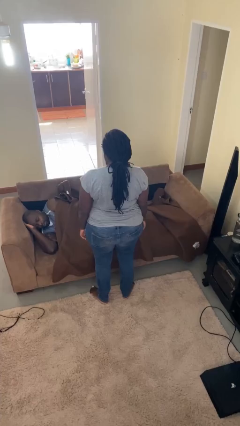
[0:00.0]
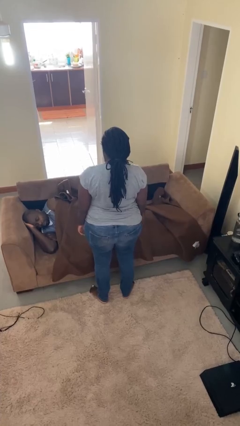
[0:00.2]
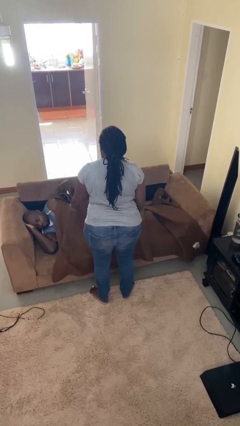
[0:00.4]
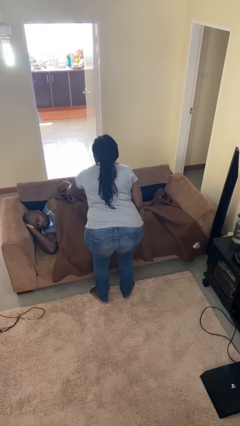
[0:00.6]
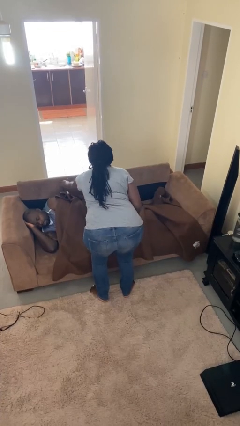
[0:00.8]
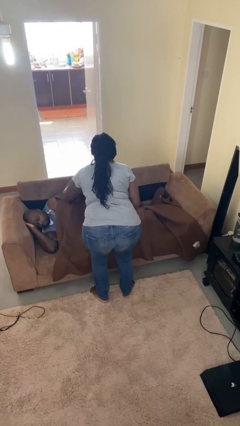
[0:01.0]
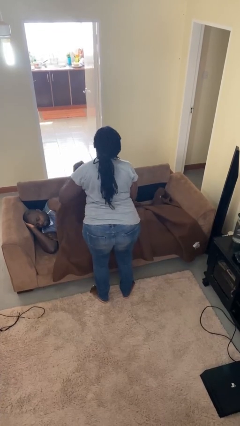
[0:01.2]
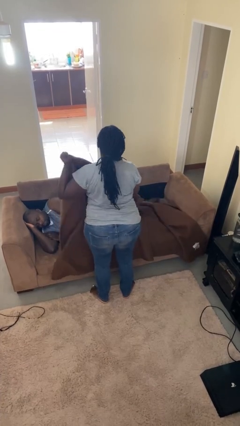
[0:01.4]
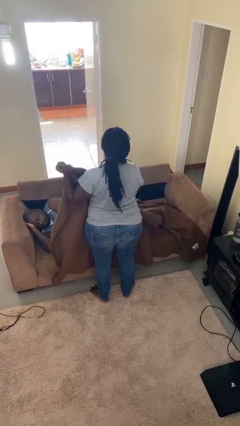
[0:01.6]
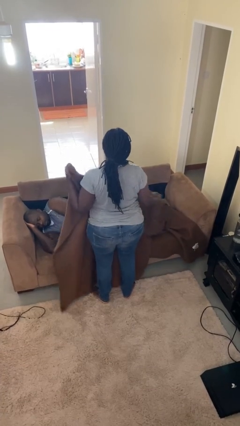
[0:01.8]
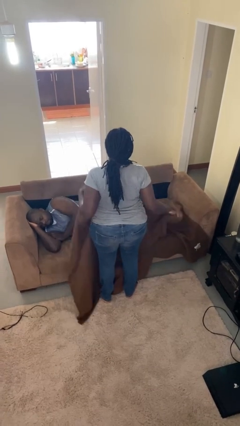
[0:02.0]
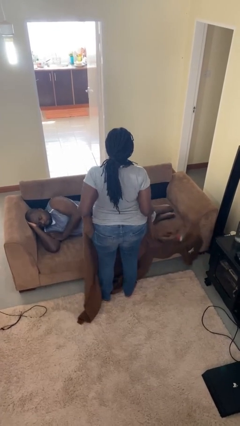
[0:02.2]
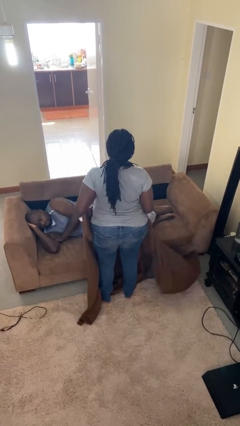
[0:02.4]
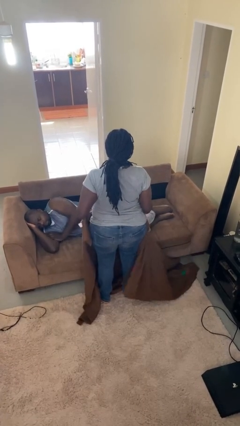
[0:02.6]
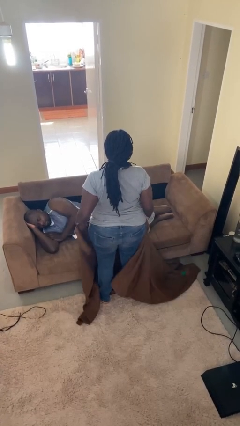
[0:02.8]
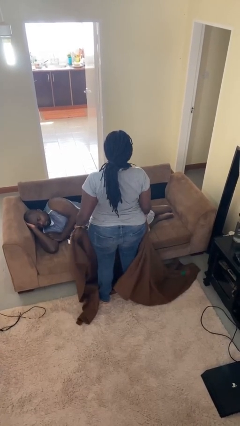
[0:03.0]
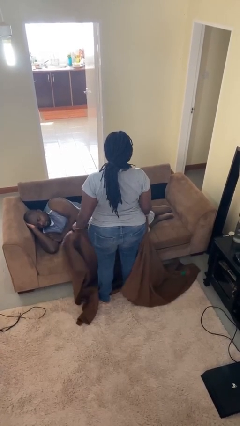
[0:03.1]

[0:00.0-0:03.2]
person uncovers friend with blanket

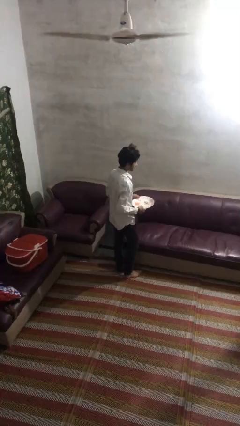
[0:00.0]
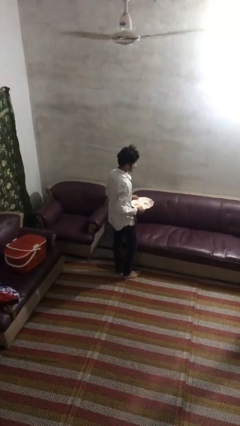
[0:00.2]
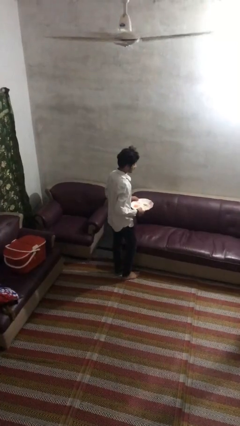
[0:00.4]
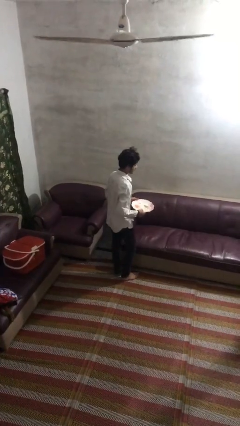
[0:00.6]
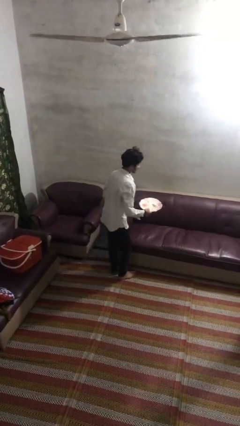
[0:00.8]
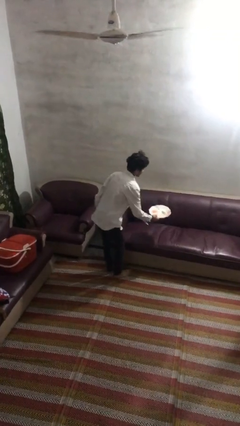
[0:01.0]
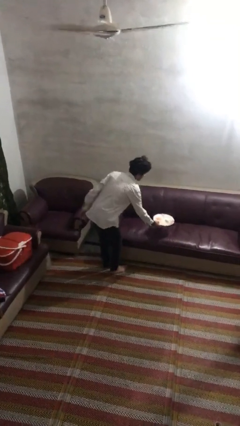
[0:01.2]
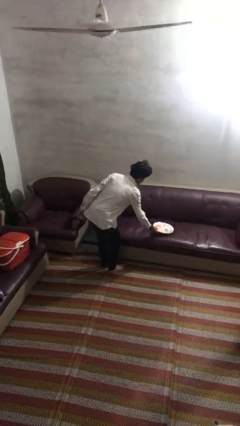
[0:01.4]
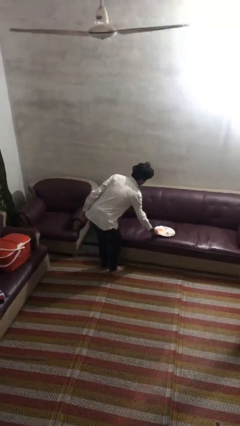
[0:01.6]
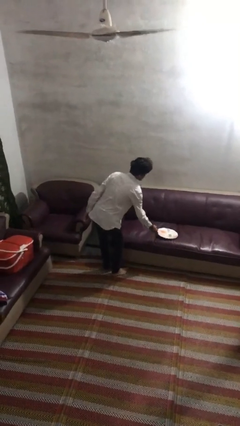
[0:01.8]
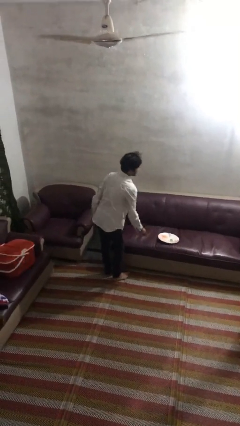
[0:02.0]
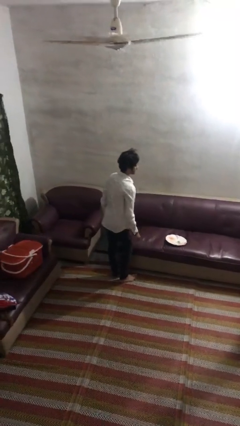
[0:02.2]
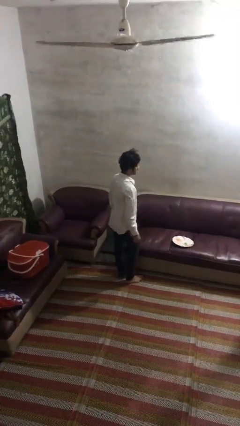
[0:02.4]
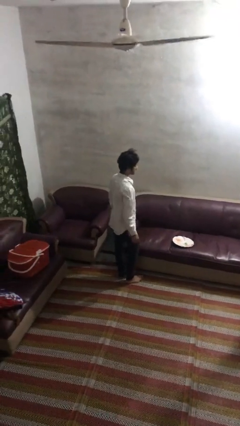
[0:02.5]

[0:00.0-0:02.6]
person puts down object on couch

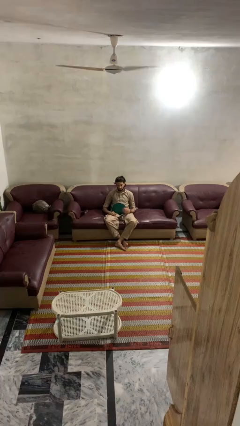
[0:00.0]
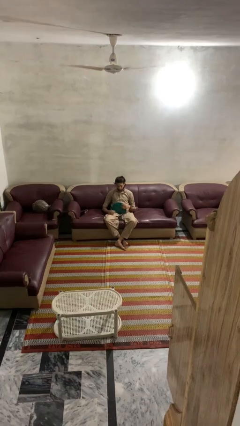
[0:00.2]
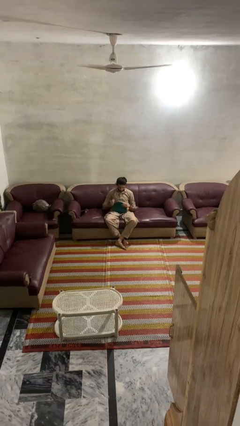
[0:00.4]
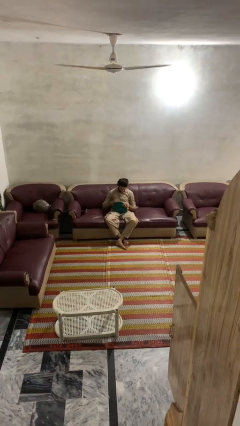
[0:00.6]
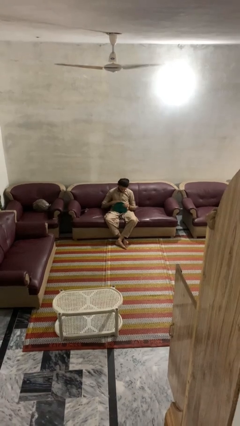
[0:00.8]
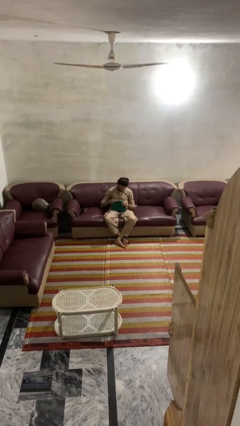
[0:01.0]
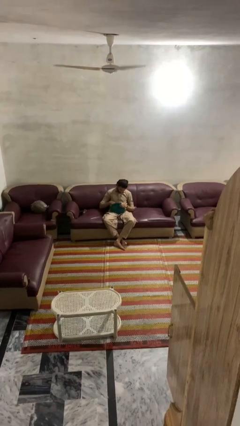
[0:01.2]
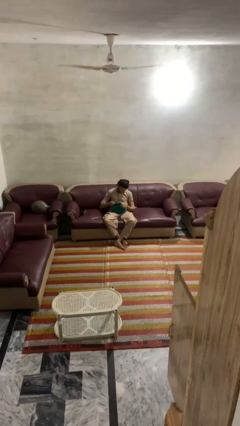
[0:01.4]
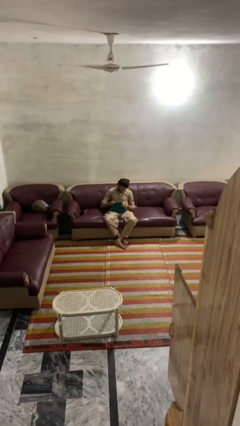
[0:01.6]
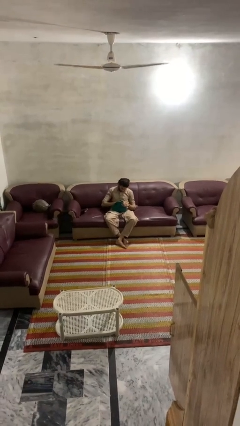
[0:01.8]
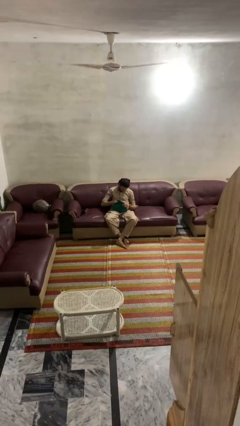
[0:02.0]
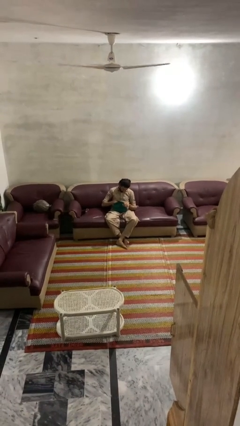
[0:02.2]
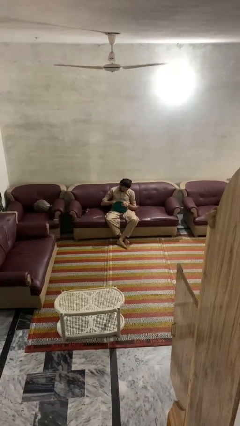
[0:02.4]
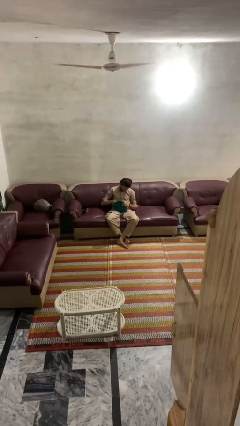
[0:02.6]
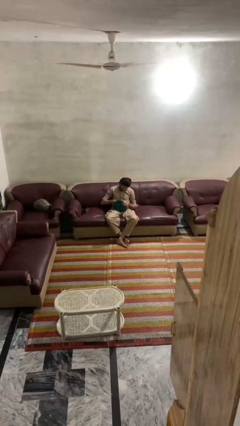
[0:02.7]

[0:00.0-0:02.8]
person searches in purse

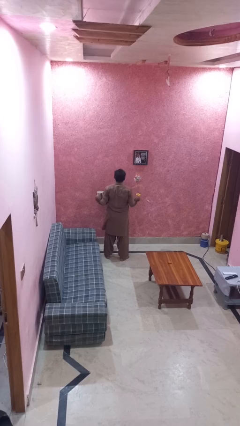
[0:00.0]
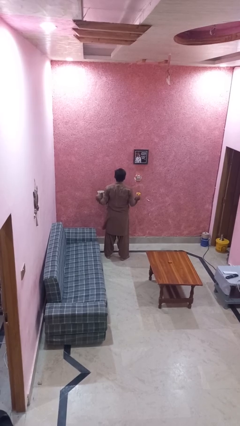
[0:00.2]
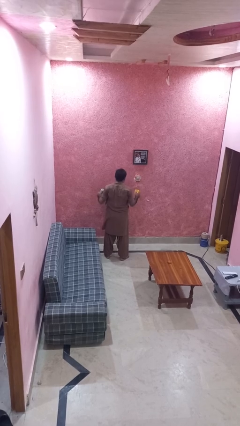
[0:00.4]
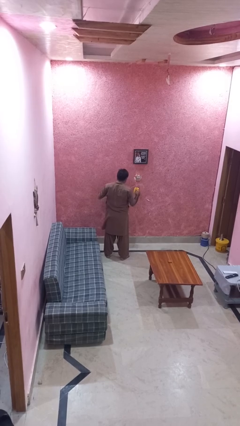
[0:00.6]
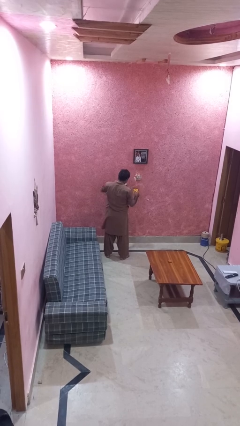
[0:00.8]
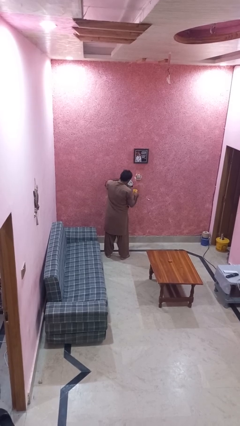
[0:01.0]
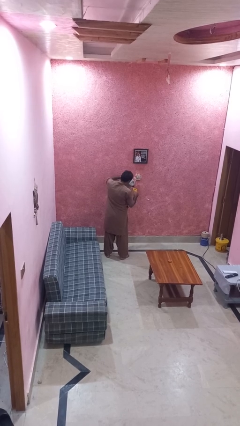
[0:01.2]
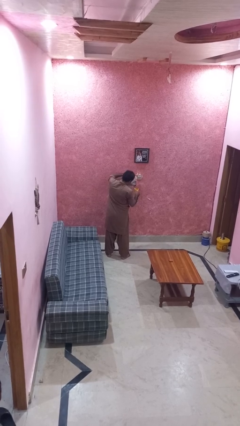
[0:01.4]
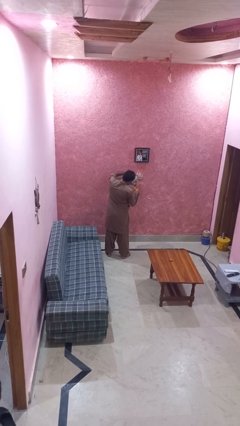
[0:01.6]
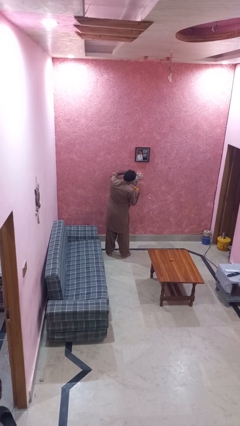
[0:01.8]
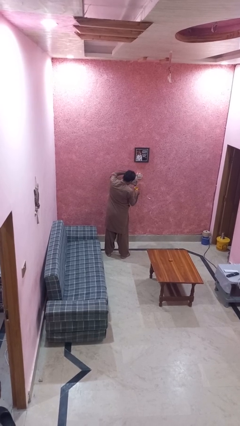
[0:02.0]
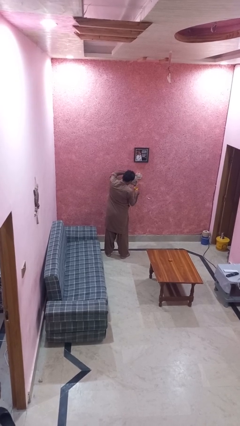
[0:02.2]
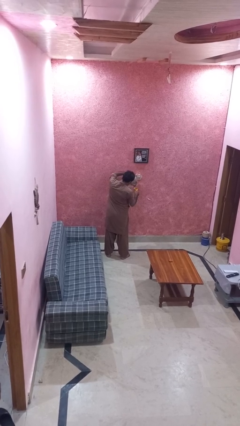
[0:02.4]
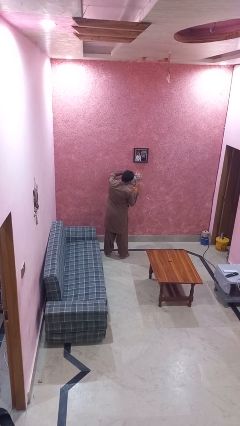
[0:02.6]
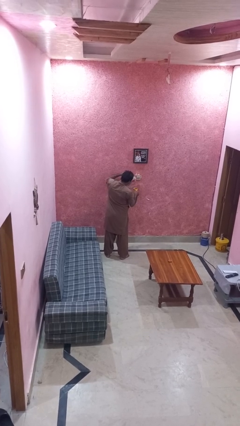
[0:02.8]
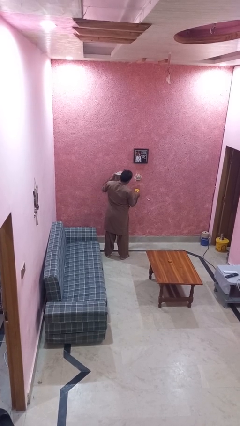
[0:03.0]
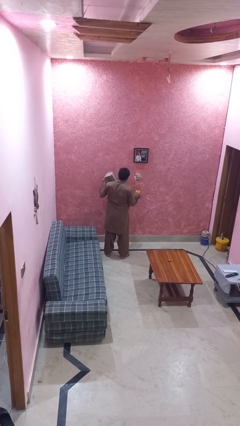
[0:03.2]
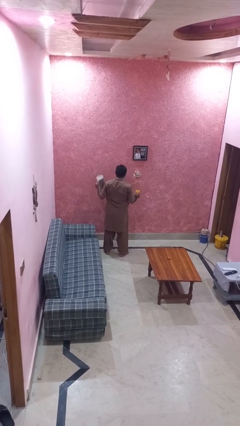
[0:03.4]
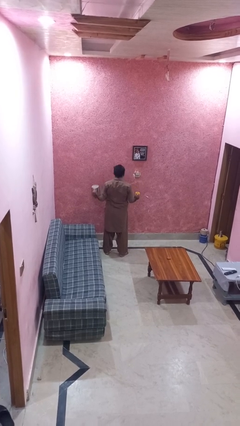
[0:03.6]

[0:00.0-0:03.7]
person pours coffee into mug

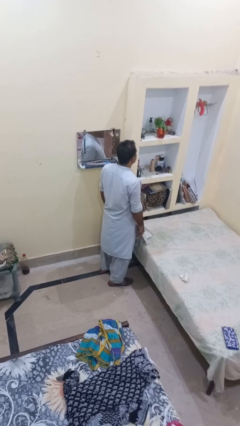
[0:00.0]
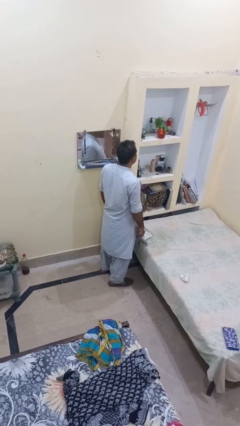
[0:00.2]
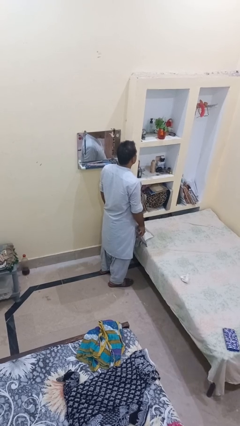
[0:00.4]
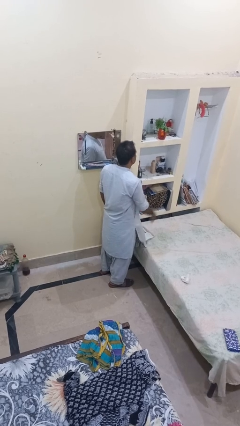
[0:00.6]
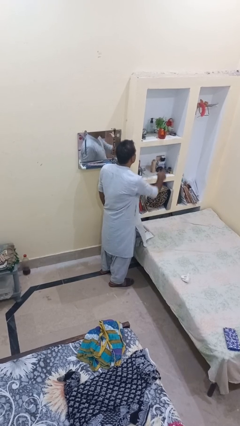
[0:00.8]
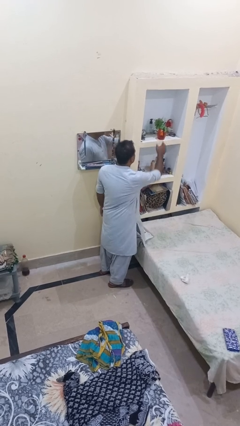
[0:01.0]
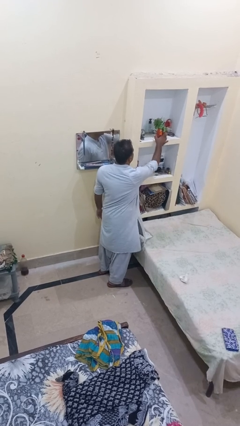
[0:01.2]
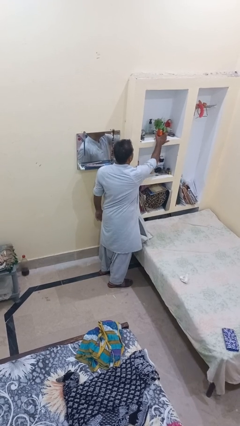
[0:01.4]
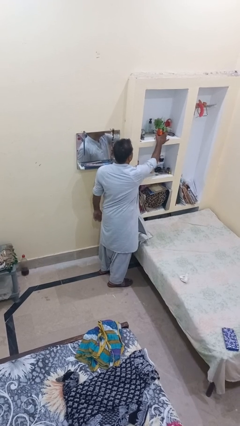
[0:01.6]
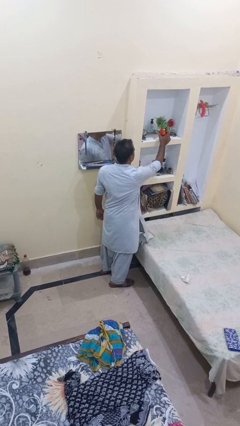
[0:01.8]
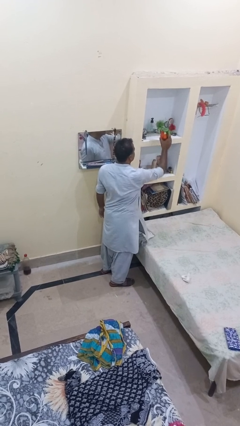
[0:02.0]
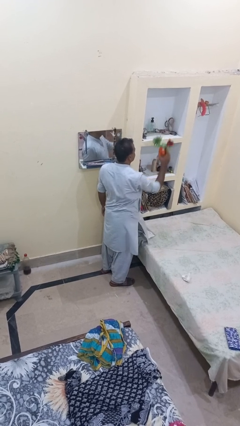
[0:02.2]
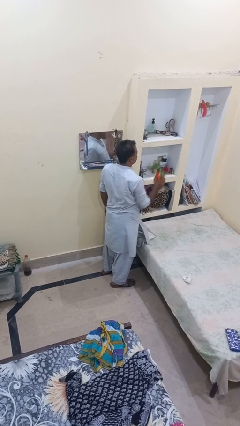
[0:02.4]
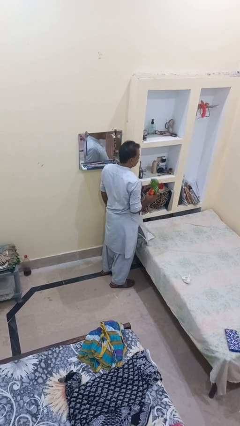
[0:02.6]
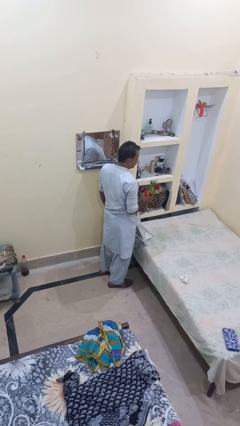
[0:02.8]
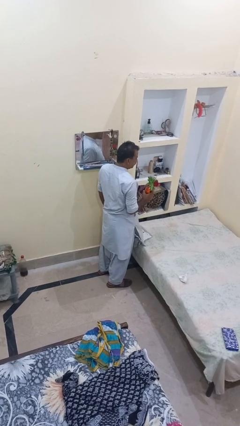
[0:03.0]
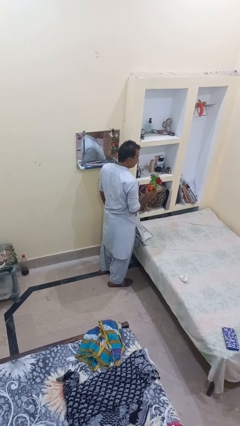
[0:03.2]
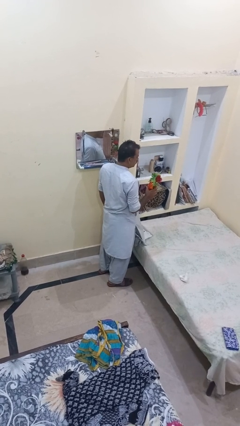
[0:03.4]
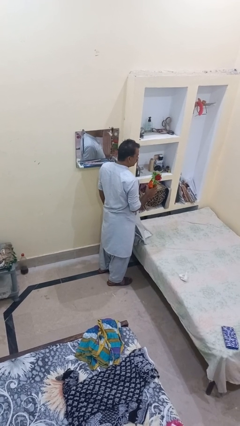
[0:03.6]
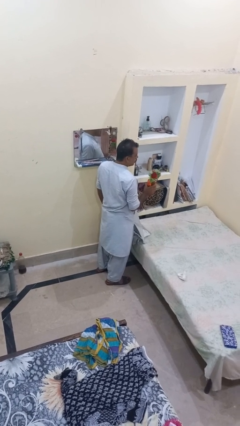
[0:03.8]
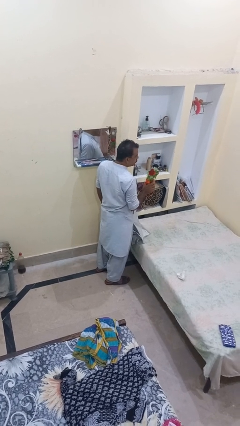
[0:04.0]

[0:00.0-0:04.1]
person picks up object from shelf

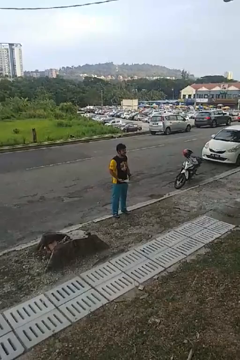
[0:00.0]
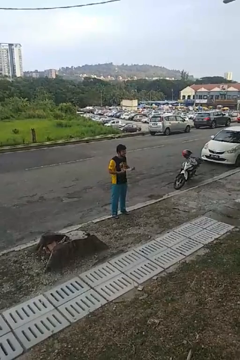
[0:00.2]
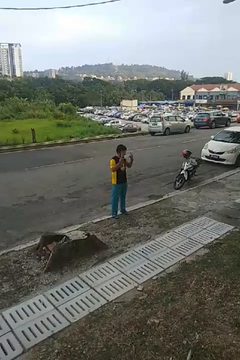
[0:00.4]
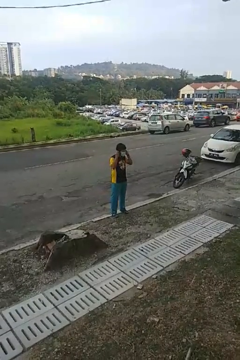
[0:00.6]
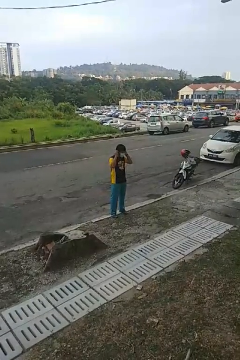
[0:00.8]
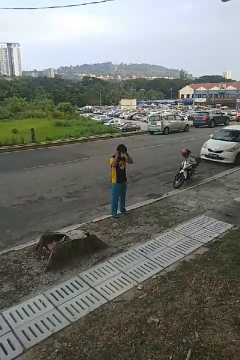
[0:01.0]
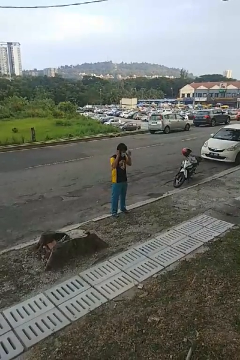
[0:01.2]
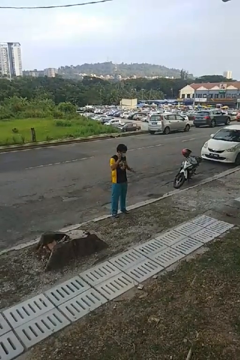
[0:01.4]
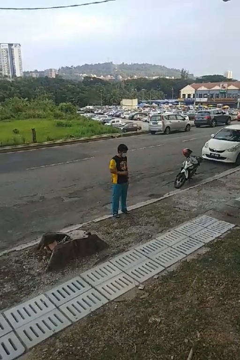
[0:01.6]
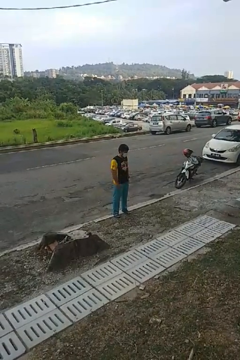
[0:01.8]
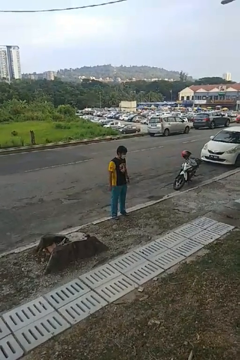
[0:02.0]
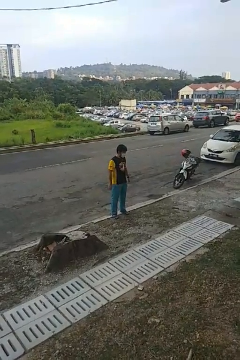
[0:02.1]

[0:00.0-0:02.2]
person puts on facemask
